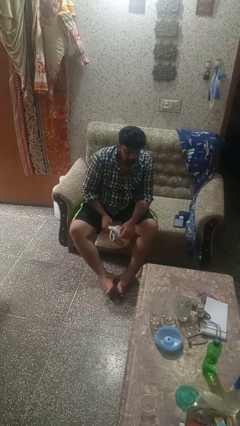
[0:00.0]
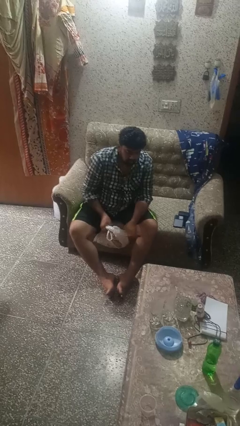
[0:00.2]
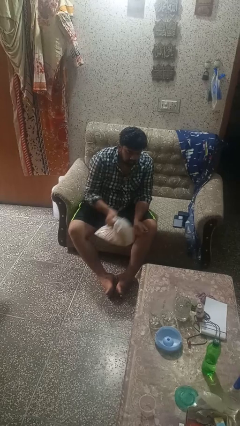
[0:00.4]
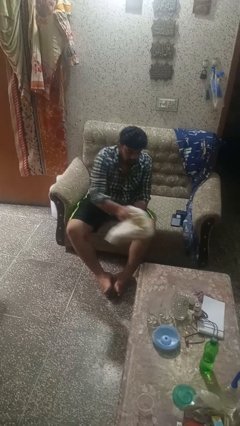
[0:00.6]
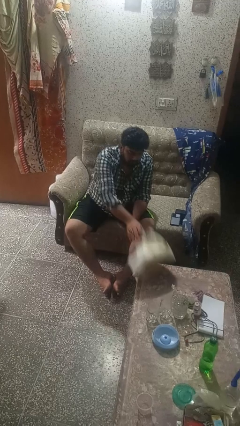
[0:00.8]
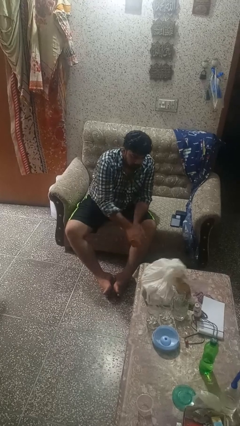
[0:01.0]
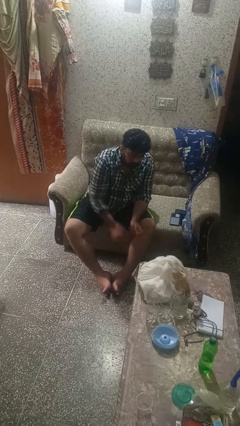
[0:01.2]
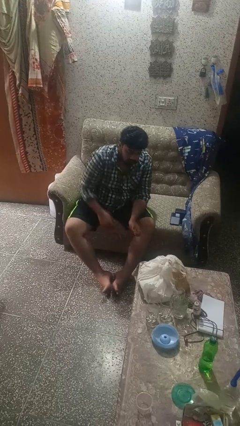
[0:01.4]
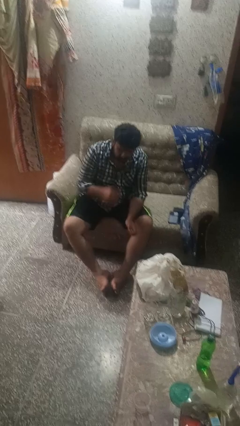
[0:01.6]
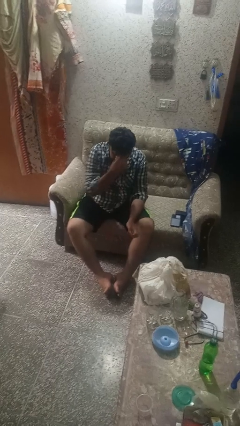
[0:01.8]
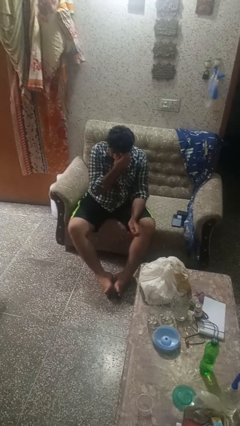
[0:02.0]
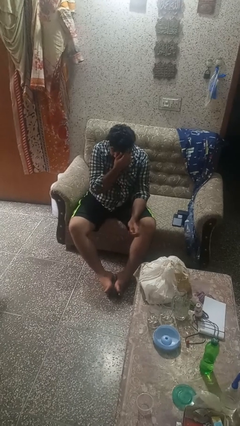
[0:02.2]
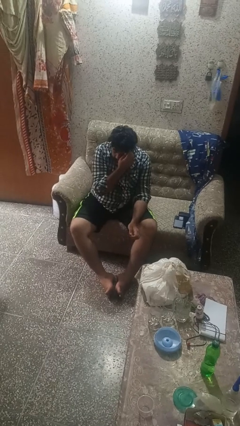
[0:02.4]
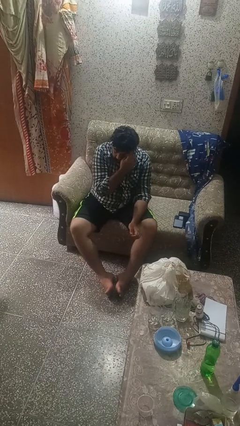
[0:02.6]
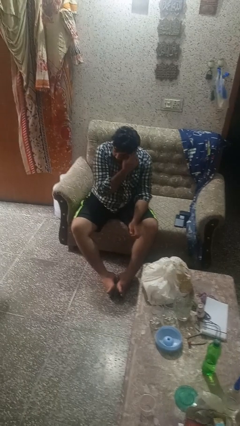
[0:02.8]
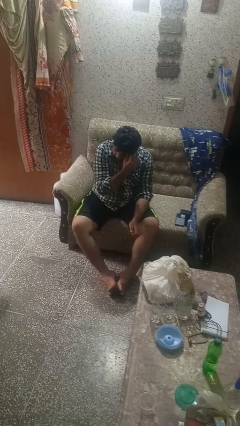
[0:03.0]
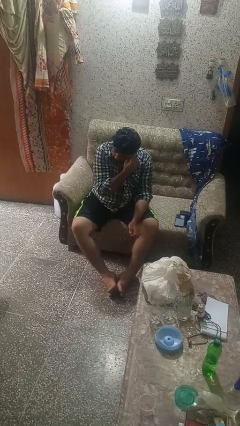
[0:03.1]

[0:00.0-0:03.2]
person throws object on table

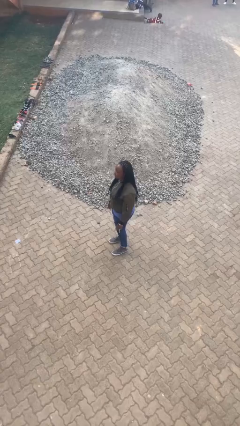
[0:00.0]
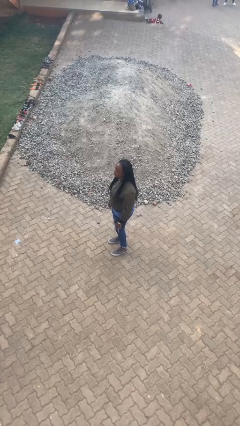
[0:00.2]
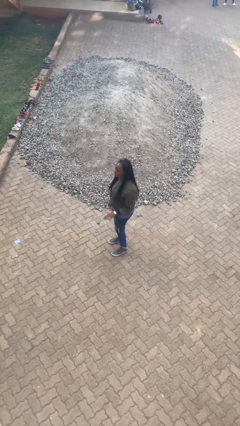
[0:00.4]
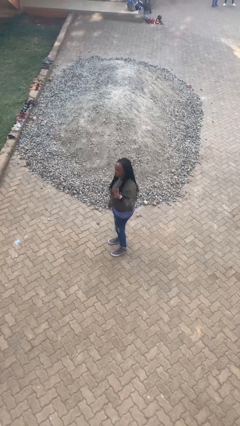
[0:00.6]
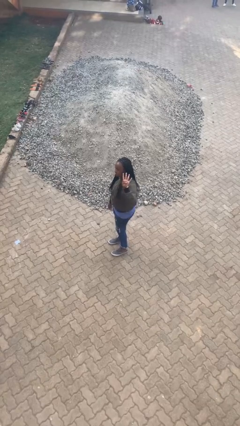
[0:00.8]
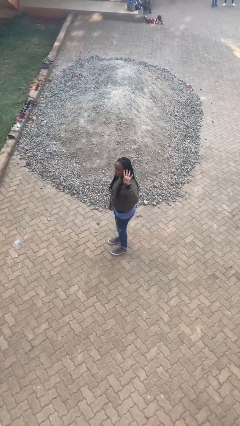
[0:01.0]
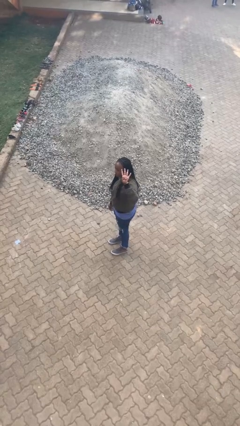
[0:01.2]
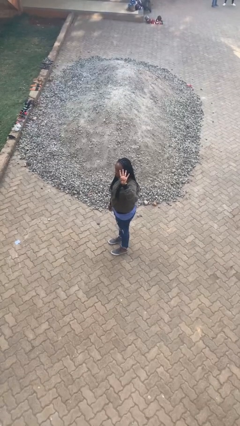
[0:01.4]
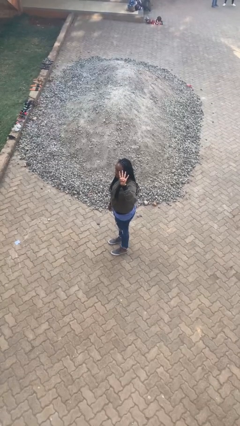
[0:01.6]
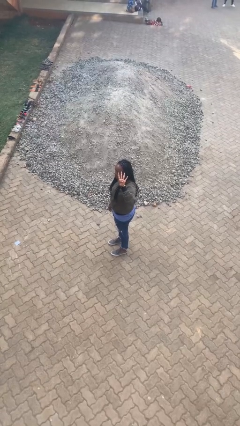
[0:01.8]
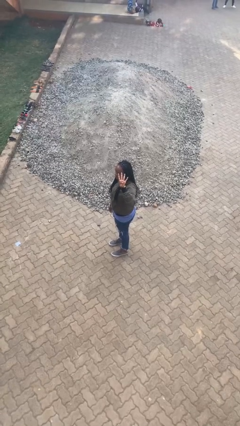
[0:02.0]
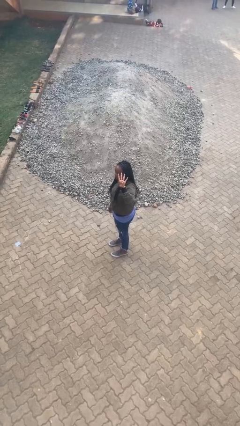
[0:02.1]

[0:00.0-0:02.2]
person gestures number four

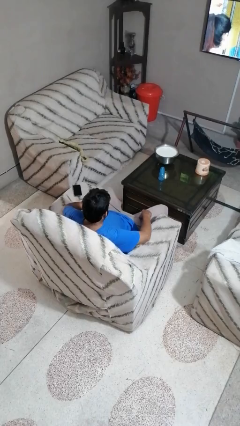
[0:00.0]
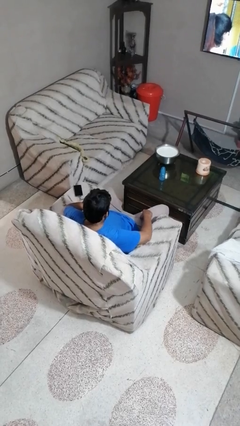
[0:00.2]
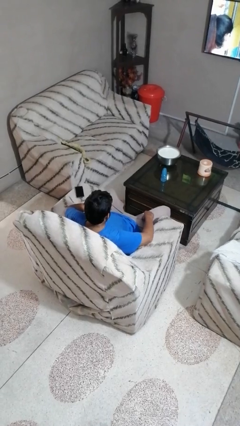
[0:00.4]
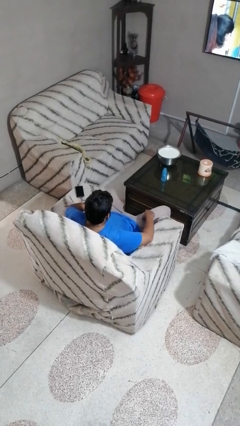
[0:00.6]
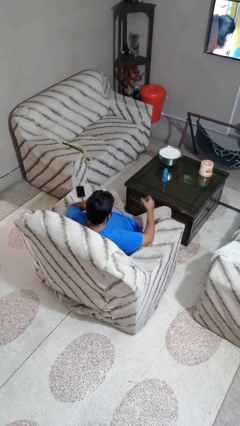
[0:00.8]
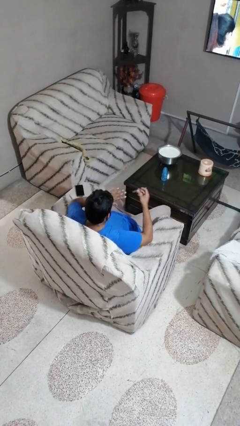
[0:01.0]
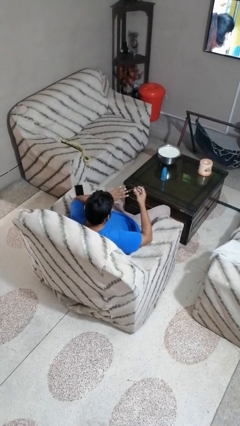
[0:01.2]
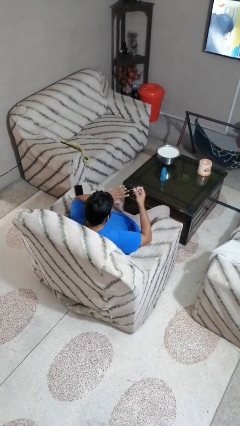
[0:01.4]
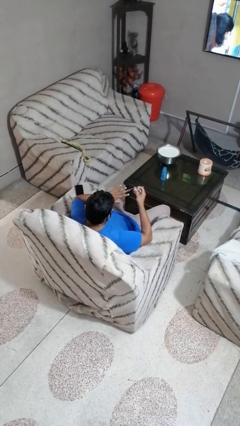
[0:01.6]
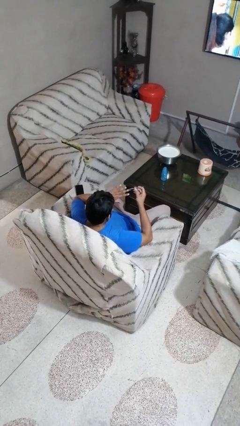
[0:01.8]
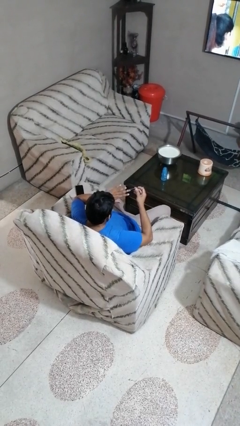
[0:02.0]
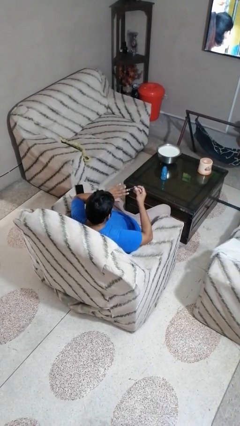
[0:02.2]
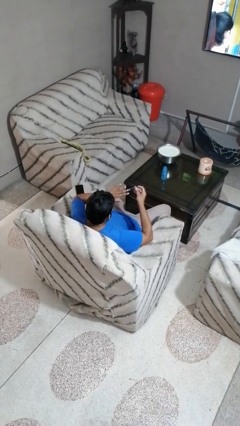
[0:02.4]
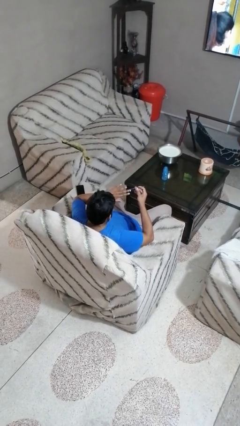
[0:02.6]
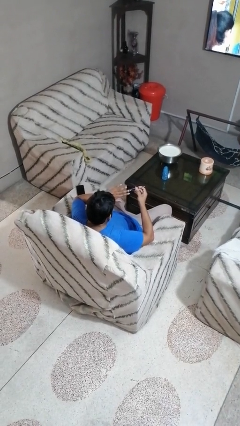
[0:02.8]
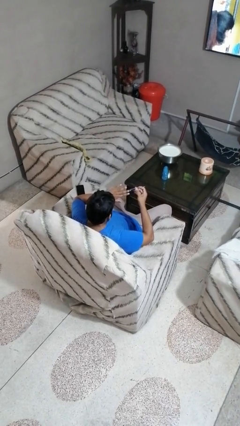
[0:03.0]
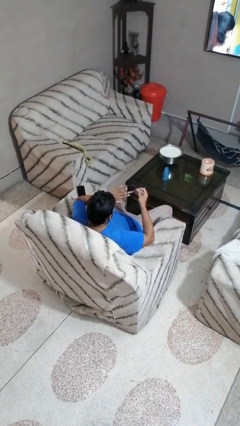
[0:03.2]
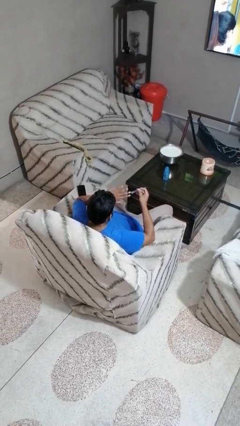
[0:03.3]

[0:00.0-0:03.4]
person clips fingernails

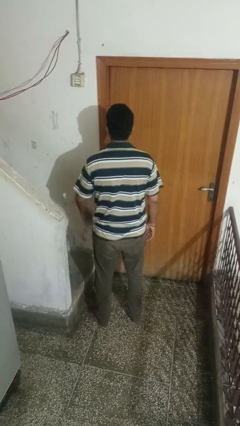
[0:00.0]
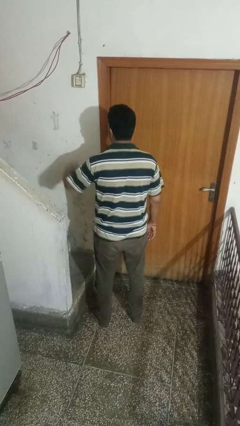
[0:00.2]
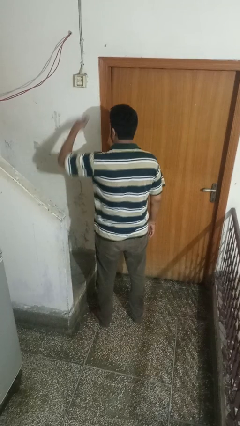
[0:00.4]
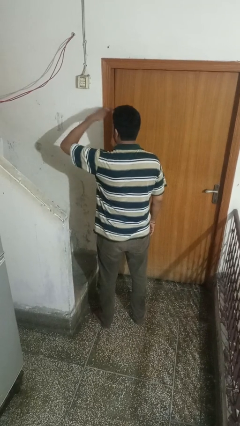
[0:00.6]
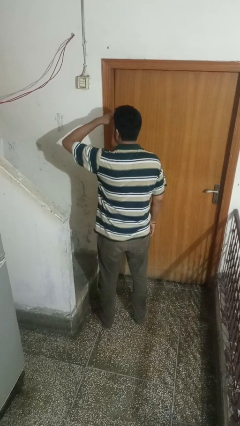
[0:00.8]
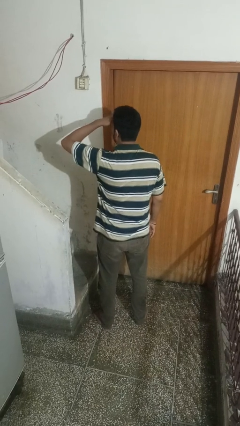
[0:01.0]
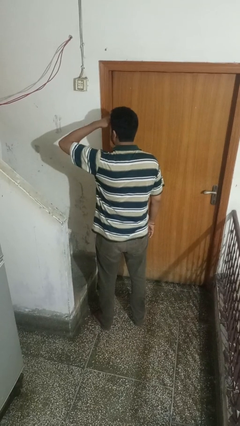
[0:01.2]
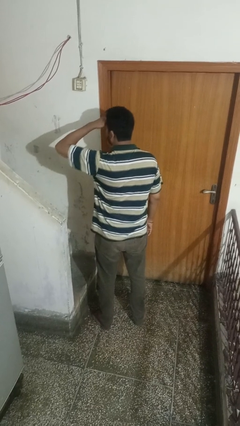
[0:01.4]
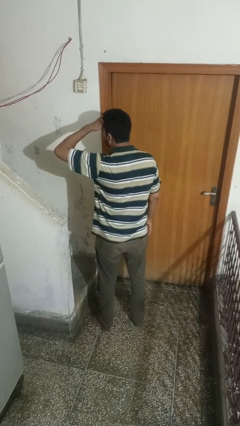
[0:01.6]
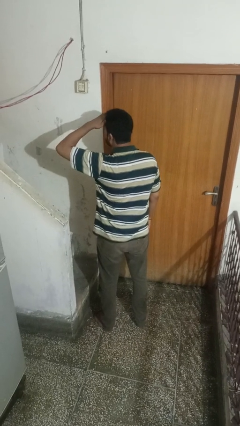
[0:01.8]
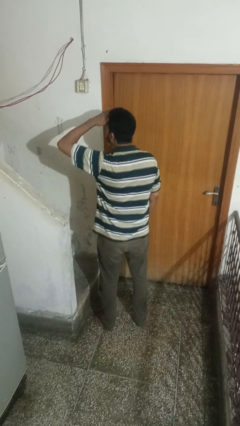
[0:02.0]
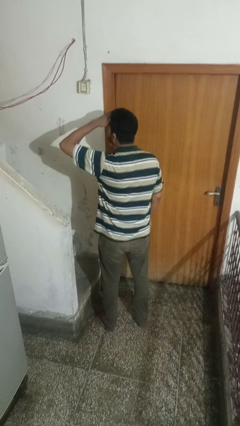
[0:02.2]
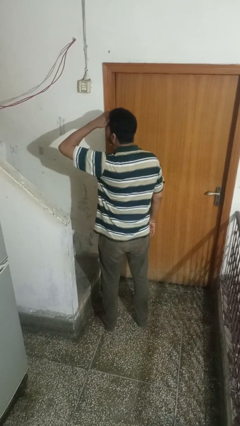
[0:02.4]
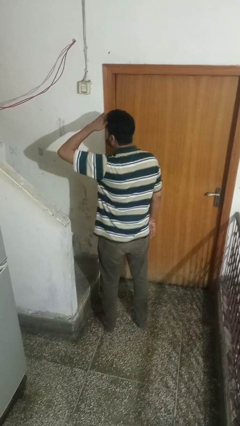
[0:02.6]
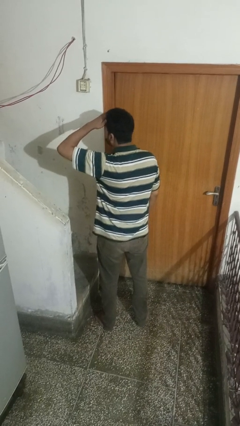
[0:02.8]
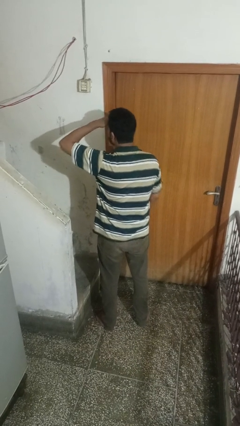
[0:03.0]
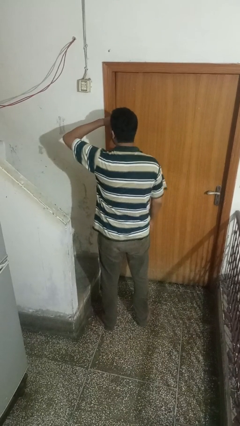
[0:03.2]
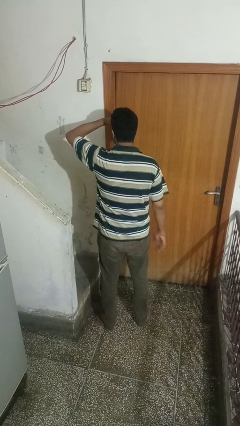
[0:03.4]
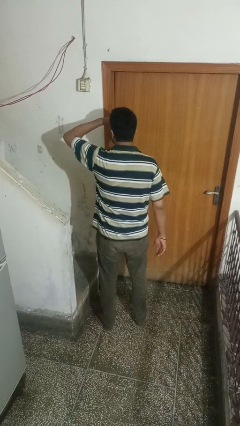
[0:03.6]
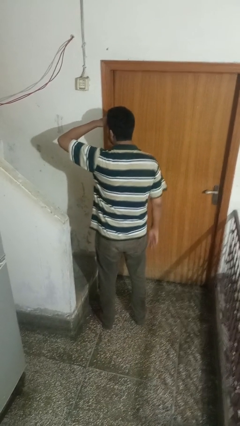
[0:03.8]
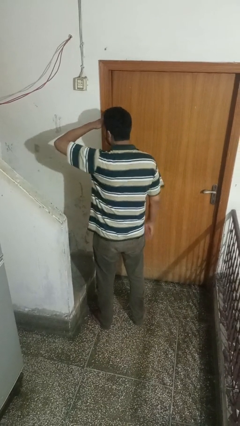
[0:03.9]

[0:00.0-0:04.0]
person shades eyes

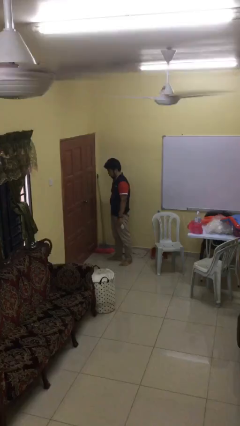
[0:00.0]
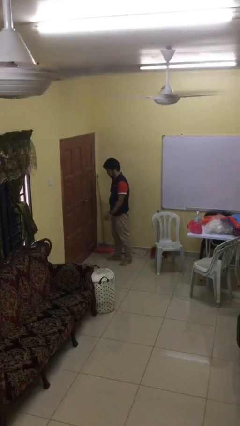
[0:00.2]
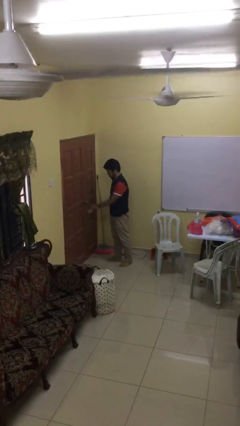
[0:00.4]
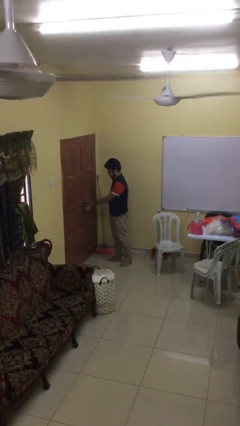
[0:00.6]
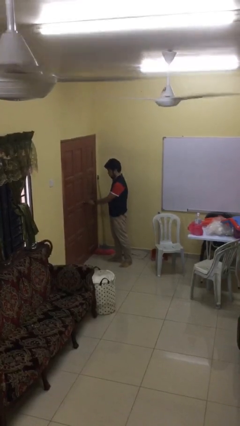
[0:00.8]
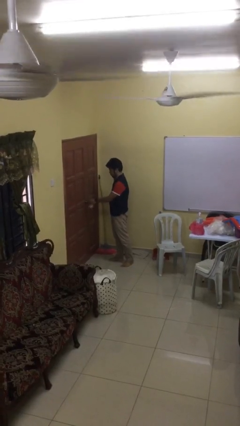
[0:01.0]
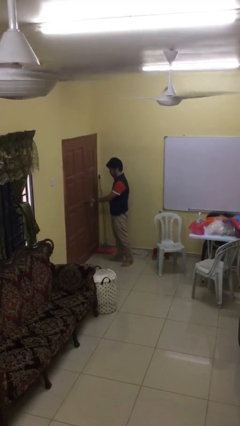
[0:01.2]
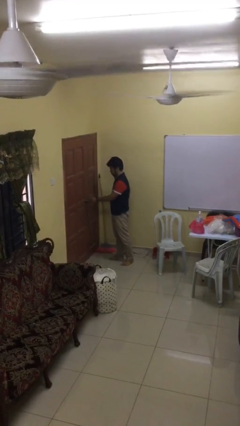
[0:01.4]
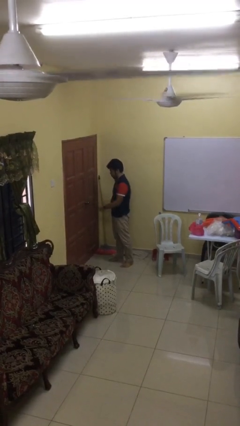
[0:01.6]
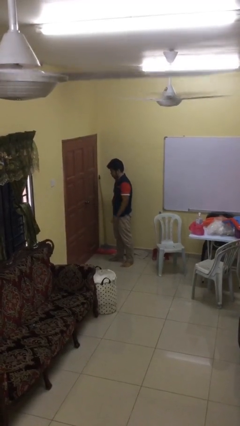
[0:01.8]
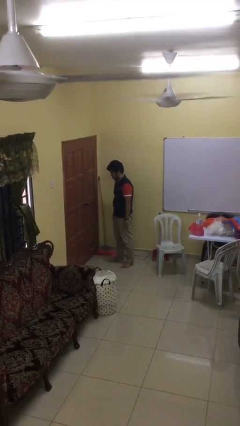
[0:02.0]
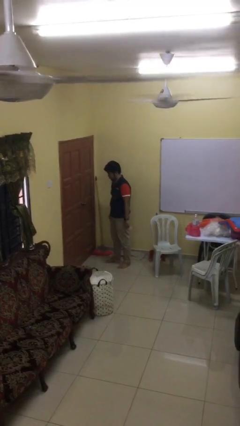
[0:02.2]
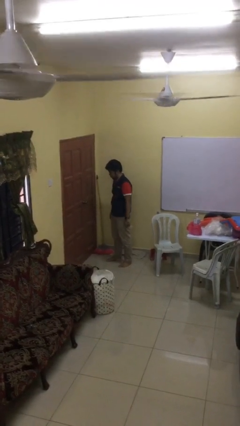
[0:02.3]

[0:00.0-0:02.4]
person unlocks door with keys

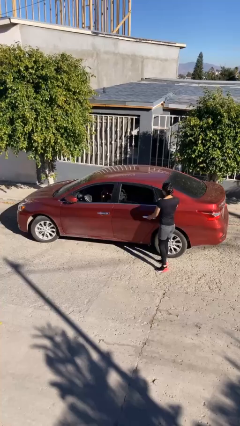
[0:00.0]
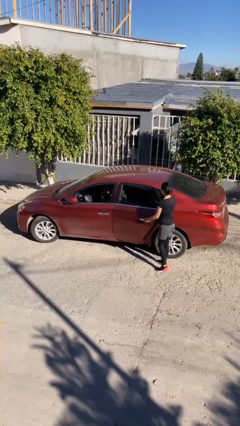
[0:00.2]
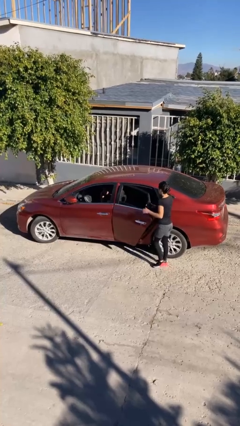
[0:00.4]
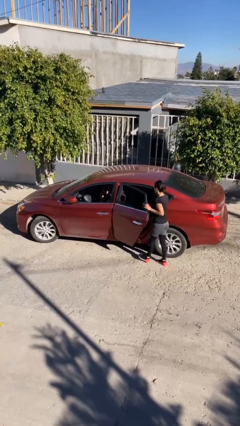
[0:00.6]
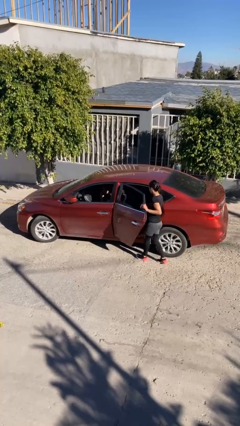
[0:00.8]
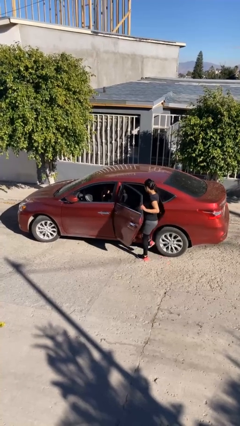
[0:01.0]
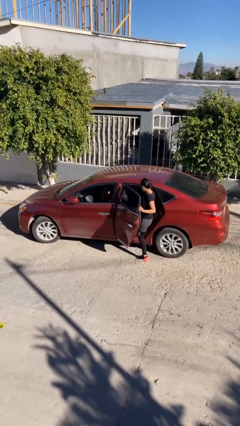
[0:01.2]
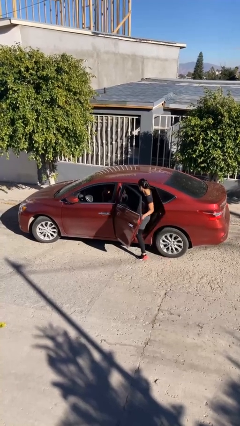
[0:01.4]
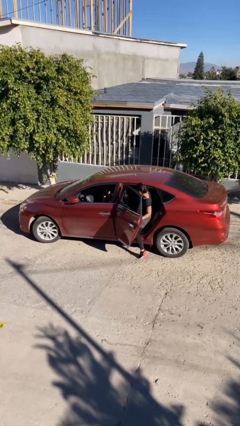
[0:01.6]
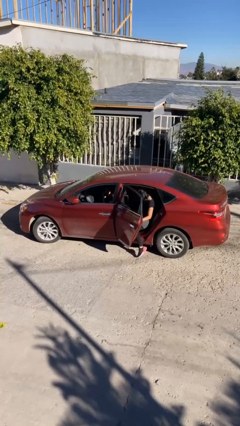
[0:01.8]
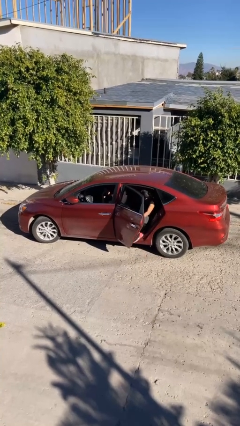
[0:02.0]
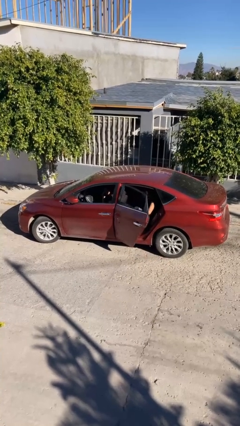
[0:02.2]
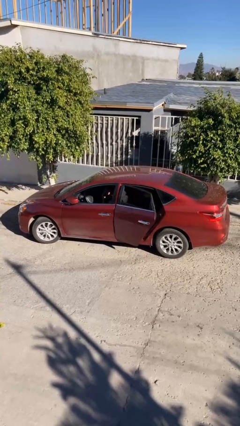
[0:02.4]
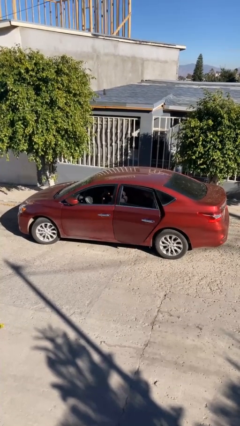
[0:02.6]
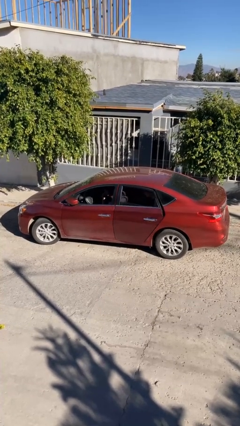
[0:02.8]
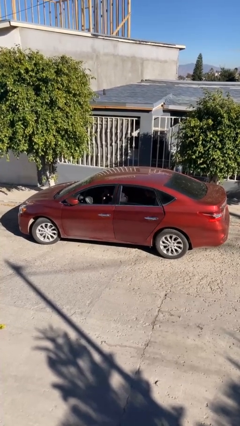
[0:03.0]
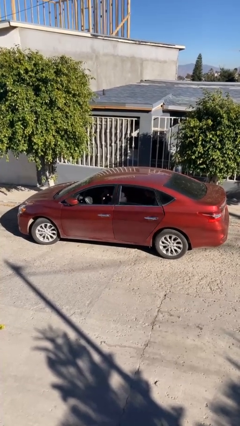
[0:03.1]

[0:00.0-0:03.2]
car picks up person
